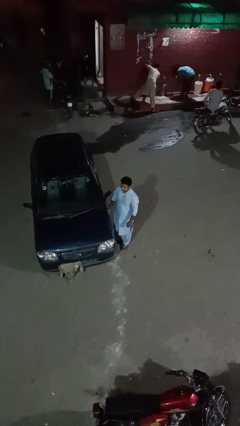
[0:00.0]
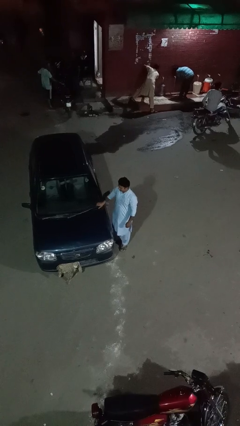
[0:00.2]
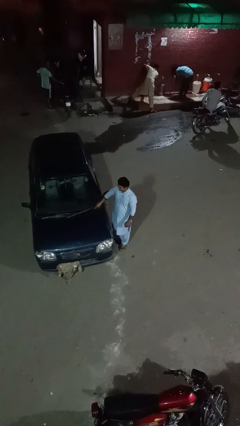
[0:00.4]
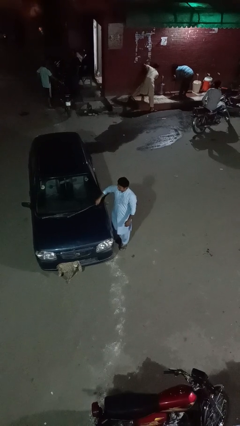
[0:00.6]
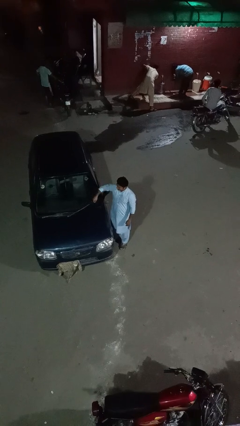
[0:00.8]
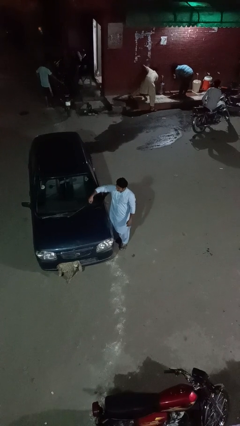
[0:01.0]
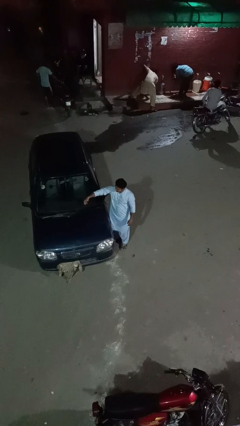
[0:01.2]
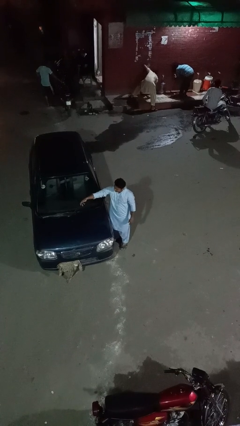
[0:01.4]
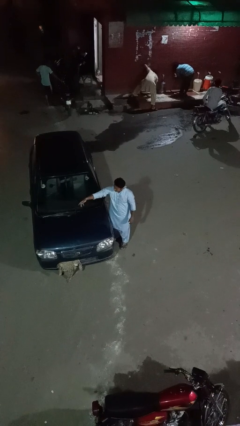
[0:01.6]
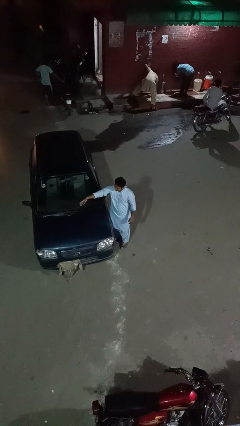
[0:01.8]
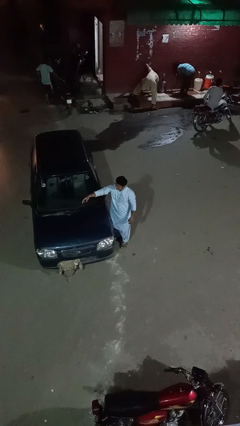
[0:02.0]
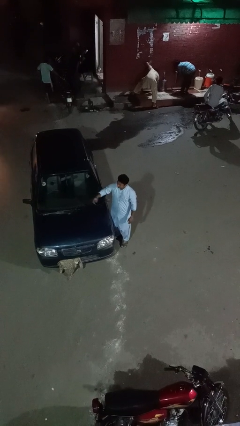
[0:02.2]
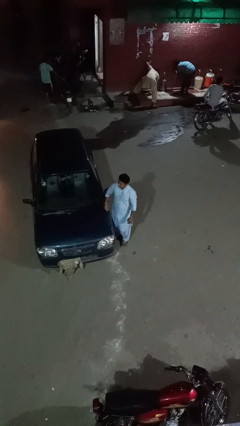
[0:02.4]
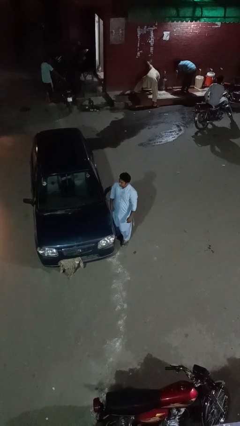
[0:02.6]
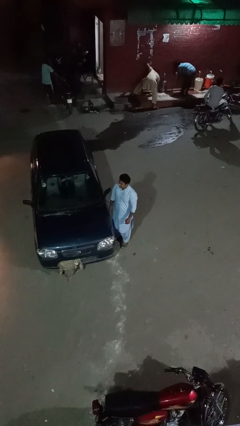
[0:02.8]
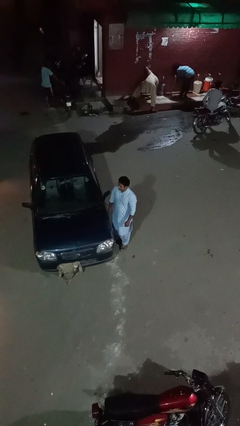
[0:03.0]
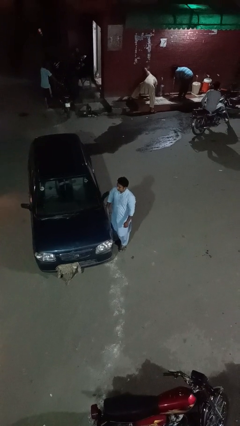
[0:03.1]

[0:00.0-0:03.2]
person flips up car wipers

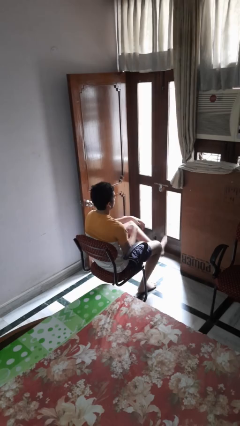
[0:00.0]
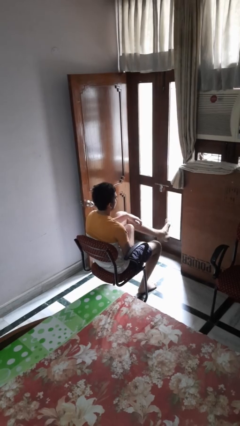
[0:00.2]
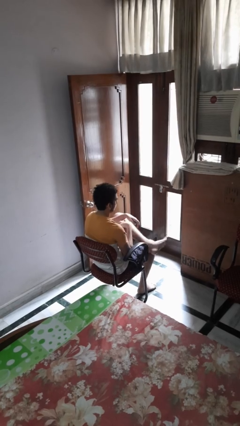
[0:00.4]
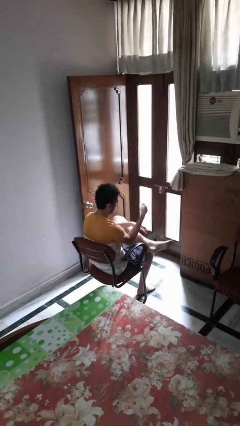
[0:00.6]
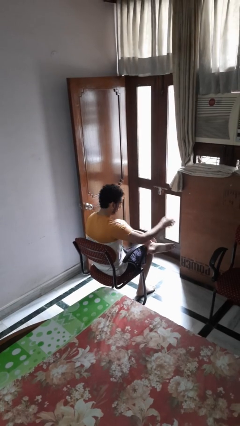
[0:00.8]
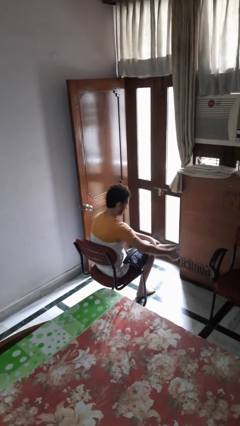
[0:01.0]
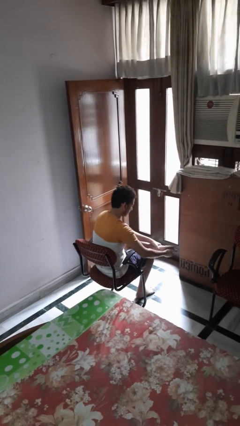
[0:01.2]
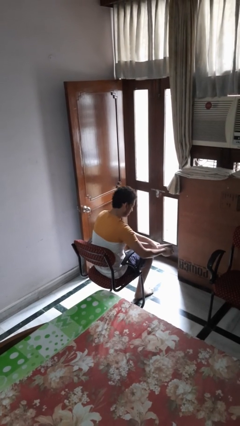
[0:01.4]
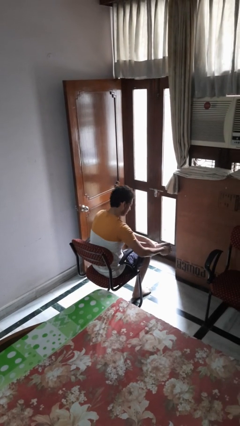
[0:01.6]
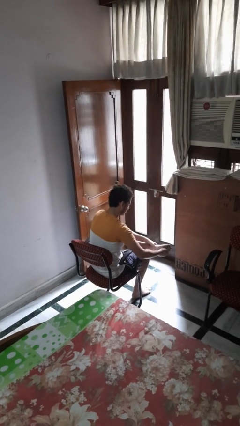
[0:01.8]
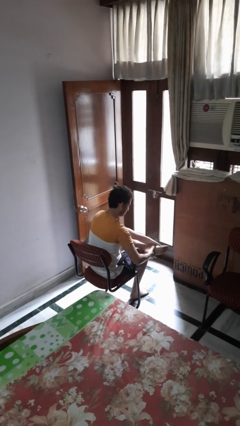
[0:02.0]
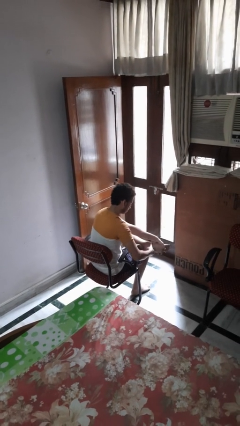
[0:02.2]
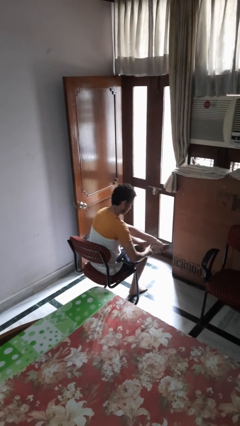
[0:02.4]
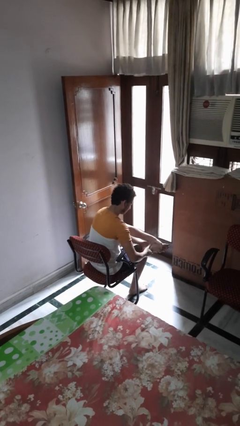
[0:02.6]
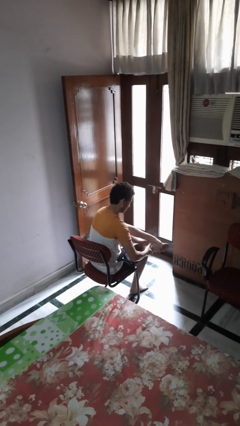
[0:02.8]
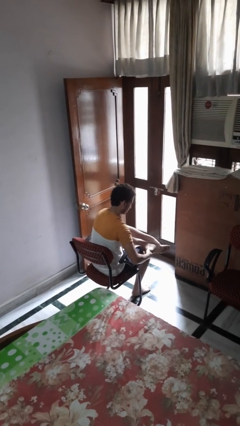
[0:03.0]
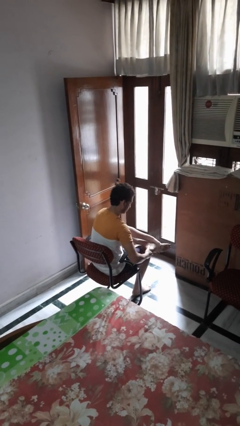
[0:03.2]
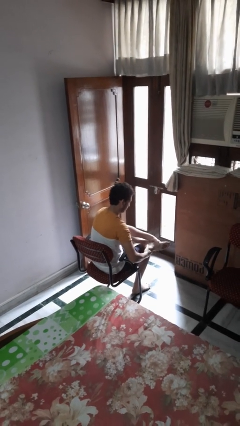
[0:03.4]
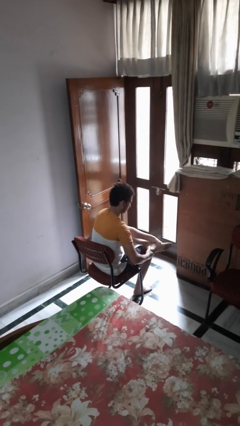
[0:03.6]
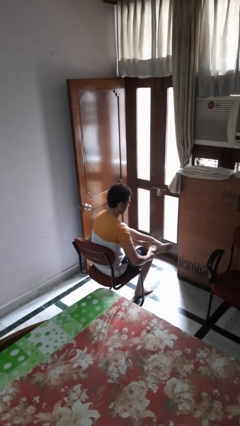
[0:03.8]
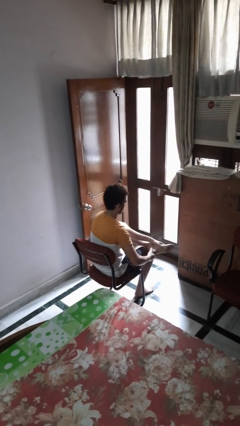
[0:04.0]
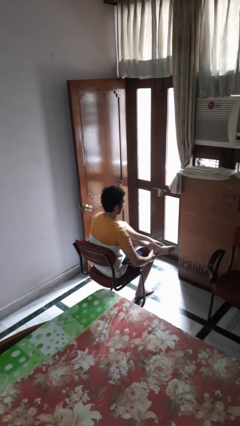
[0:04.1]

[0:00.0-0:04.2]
person rubs foot

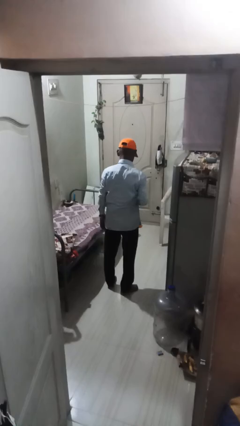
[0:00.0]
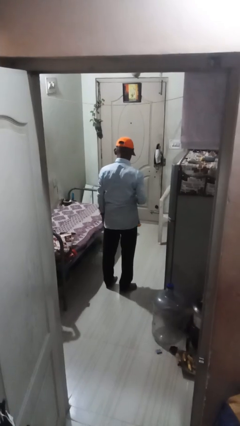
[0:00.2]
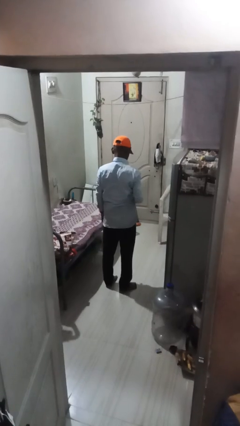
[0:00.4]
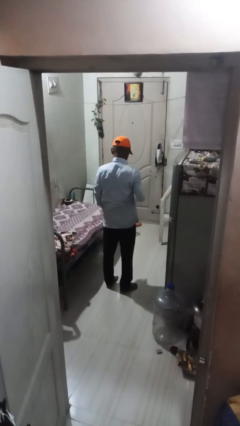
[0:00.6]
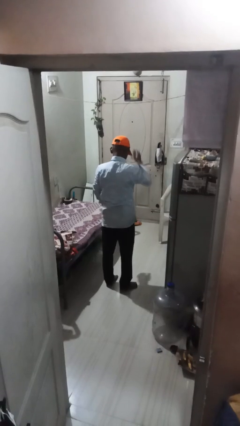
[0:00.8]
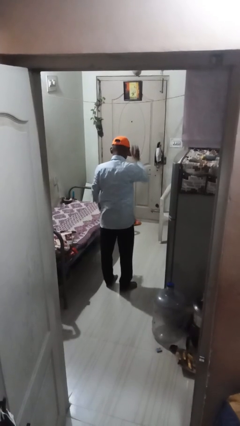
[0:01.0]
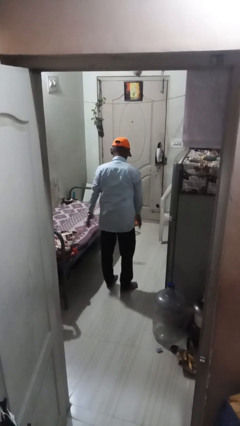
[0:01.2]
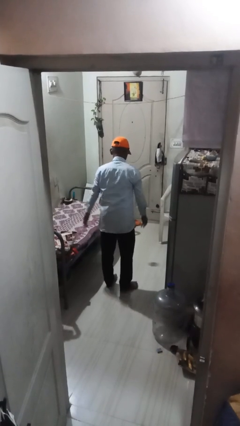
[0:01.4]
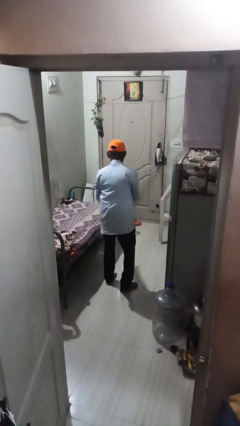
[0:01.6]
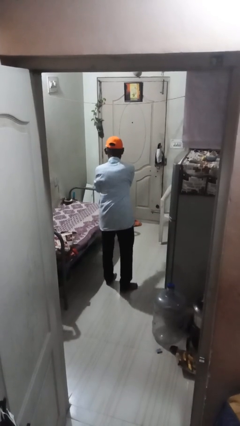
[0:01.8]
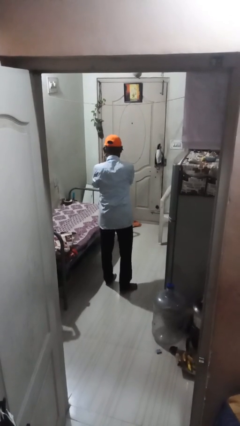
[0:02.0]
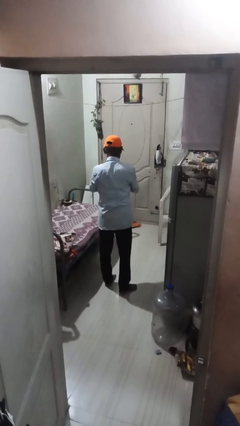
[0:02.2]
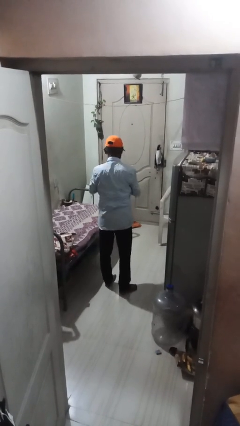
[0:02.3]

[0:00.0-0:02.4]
person bounces ball on floor

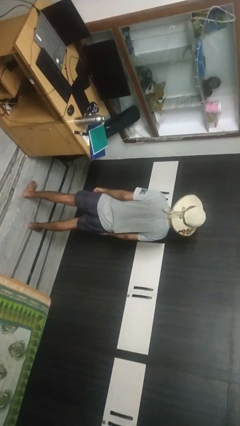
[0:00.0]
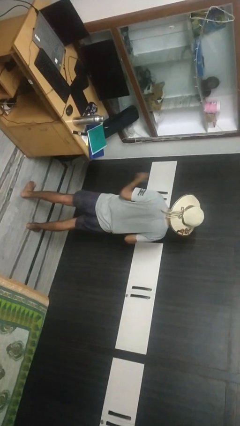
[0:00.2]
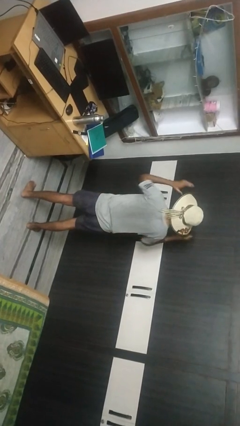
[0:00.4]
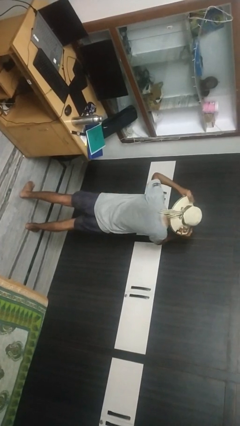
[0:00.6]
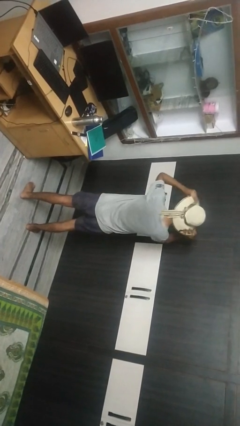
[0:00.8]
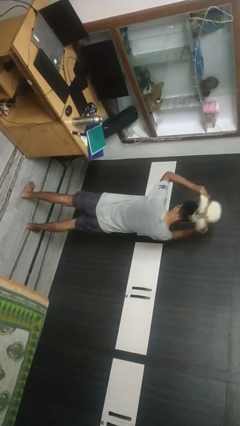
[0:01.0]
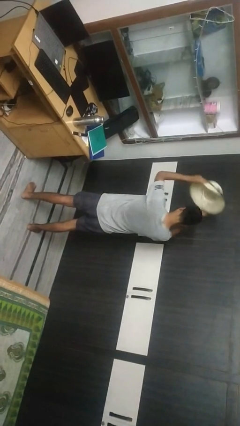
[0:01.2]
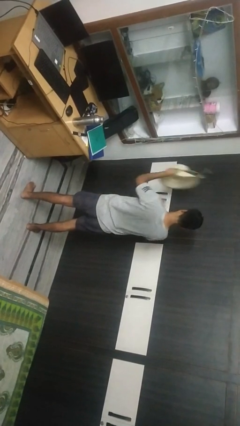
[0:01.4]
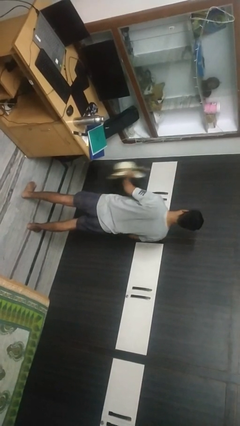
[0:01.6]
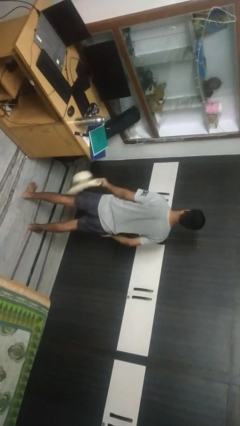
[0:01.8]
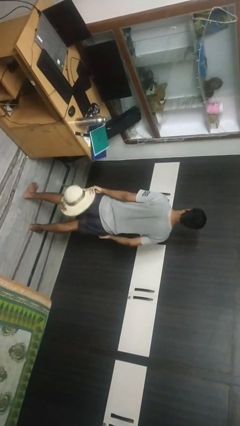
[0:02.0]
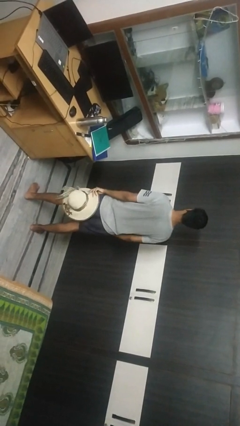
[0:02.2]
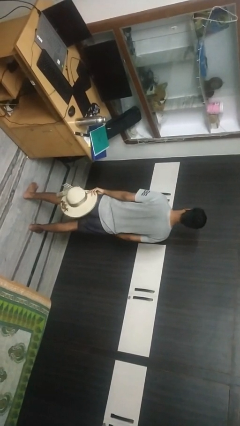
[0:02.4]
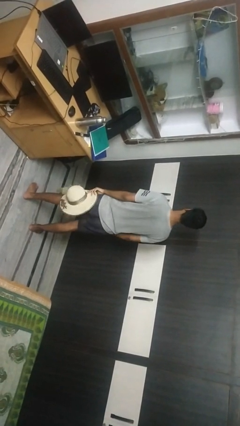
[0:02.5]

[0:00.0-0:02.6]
person takes off hat

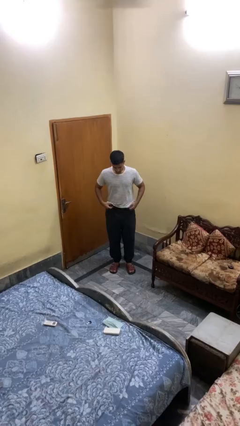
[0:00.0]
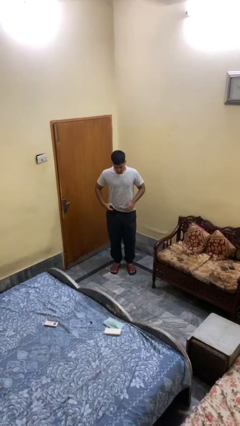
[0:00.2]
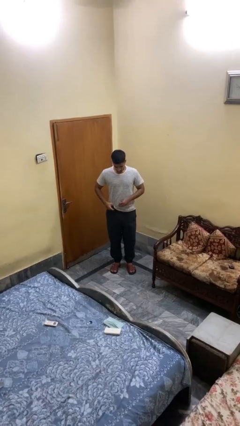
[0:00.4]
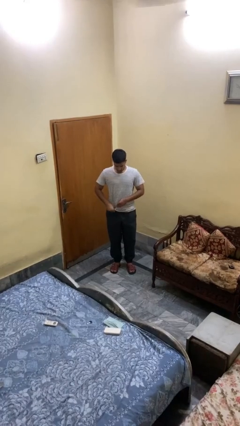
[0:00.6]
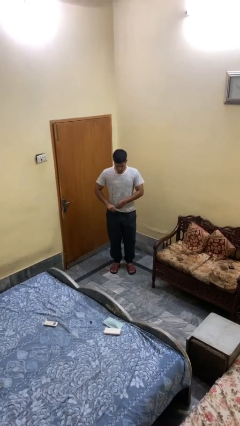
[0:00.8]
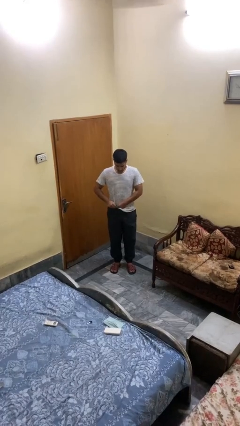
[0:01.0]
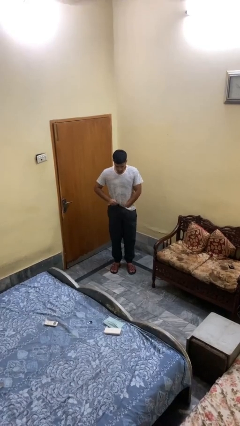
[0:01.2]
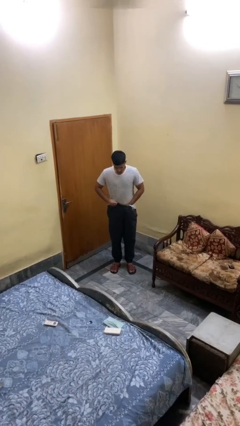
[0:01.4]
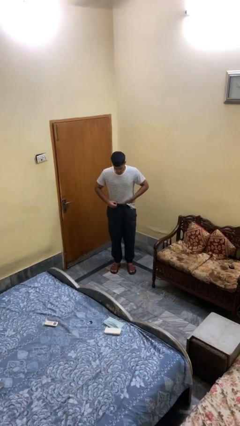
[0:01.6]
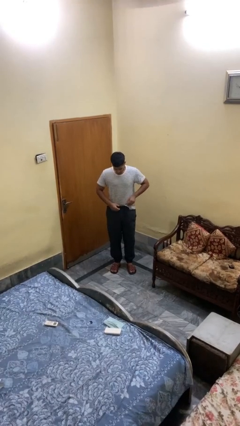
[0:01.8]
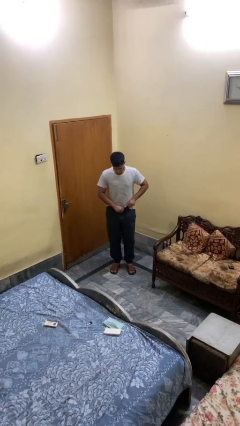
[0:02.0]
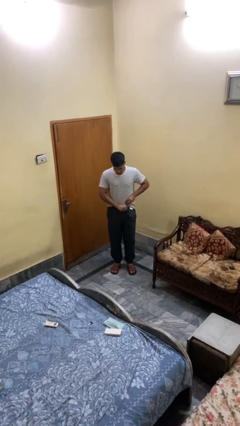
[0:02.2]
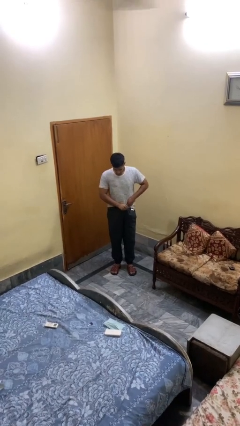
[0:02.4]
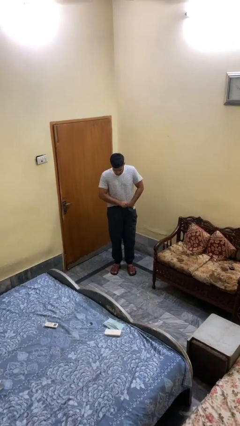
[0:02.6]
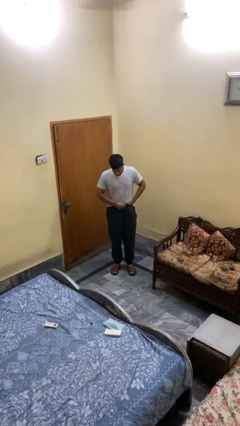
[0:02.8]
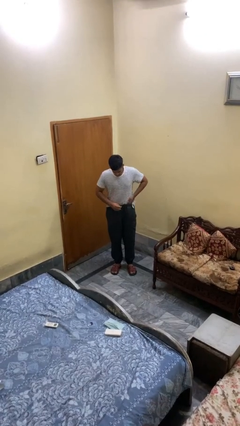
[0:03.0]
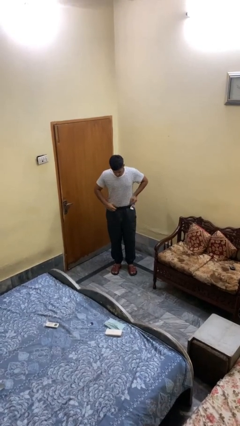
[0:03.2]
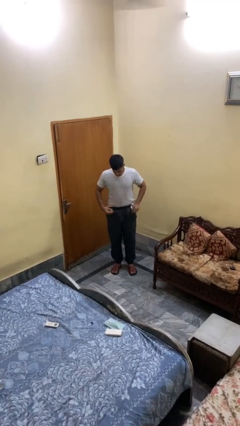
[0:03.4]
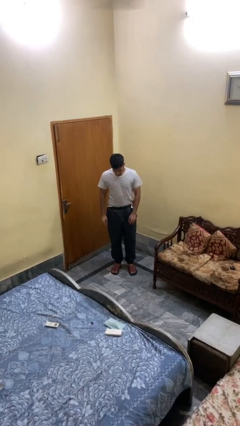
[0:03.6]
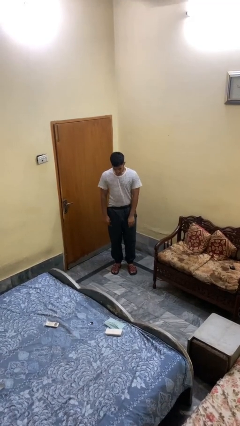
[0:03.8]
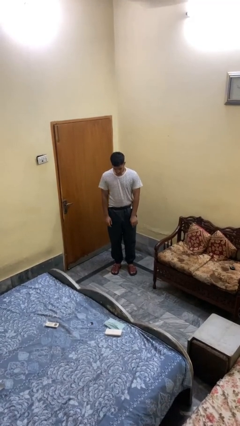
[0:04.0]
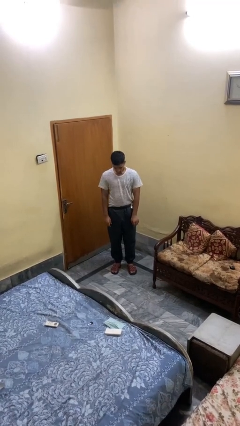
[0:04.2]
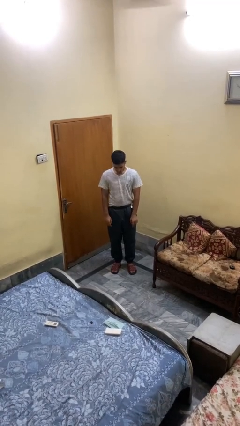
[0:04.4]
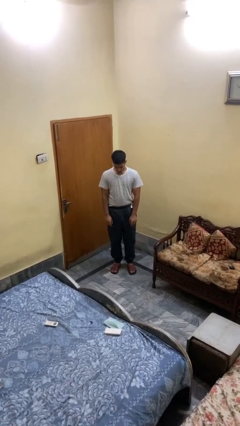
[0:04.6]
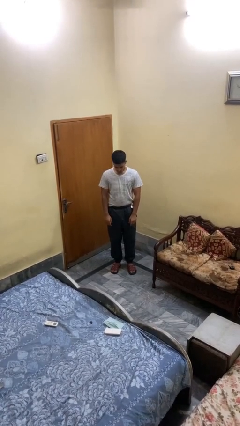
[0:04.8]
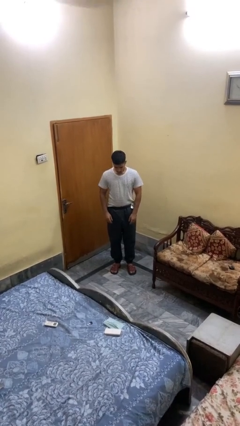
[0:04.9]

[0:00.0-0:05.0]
person tucks in shirt
